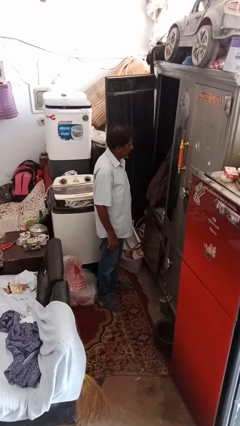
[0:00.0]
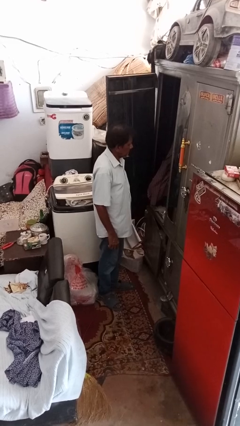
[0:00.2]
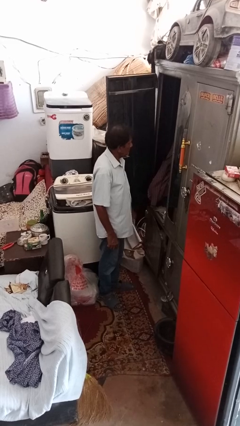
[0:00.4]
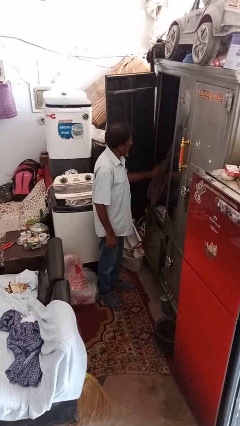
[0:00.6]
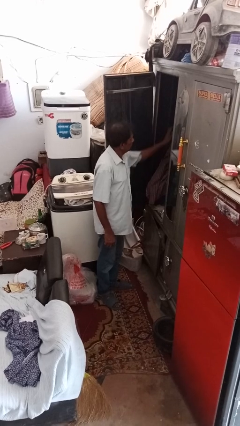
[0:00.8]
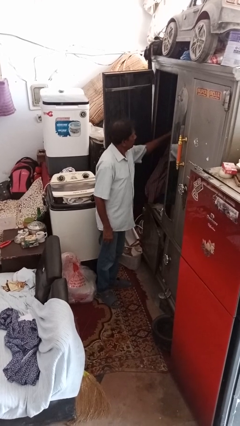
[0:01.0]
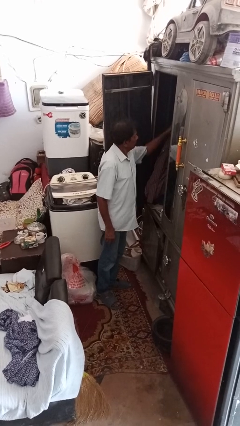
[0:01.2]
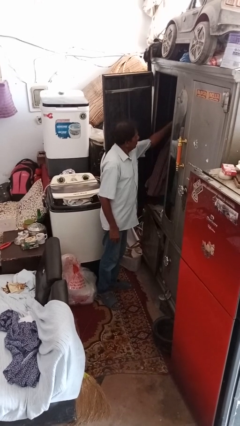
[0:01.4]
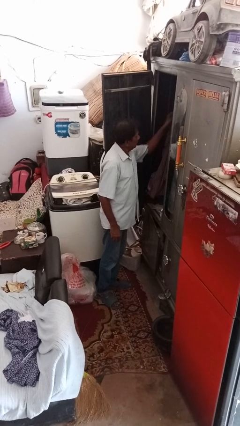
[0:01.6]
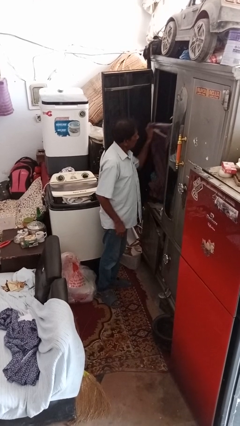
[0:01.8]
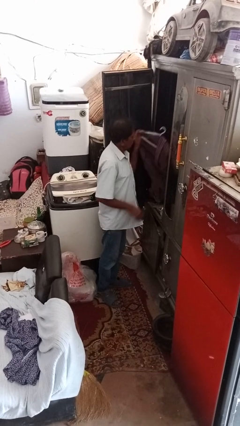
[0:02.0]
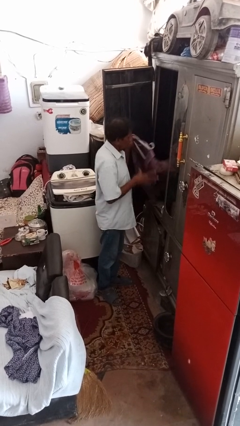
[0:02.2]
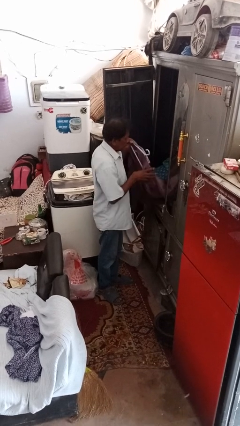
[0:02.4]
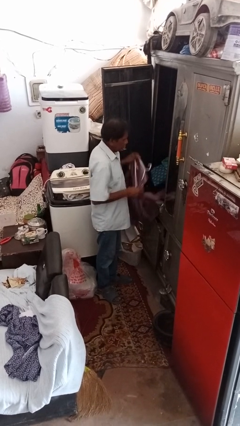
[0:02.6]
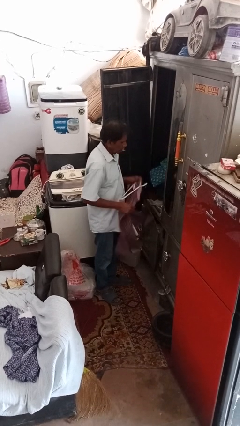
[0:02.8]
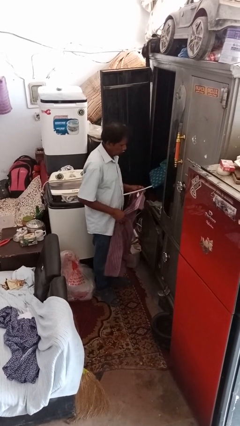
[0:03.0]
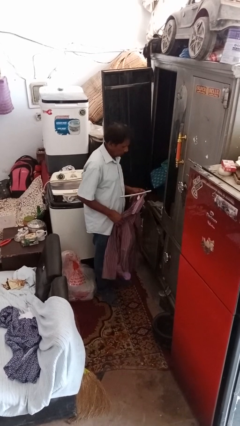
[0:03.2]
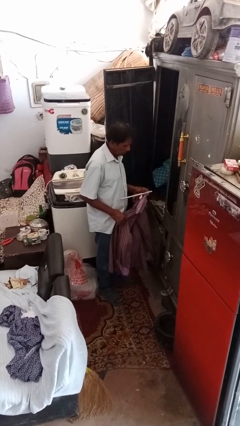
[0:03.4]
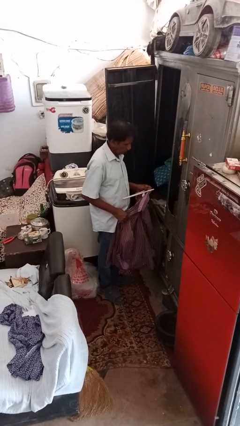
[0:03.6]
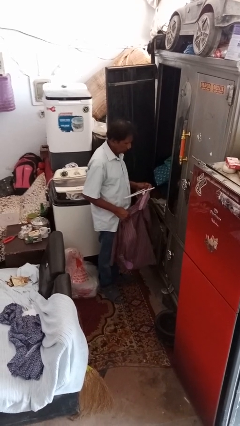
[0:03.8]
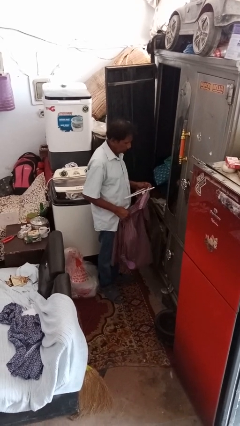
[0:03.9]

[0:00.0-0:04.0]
person takes clothes from closet

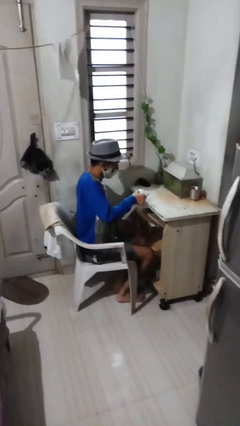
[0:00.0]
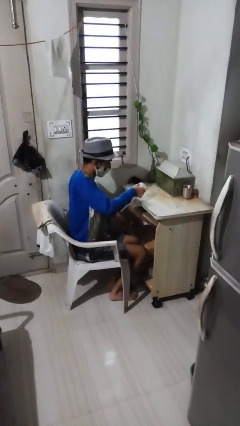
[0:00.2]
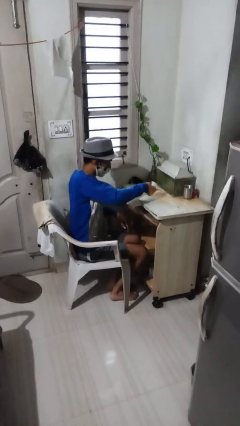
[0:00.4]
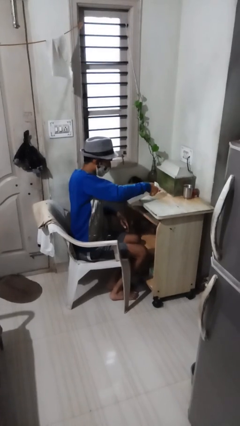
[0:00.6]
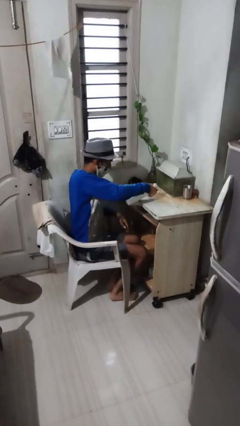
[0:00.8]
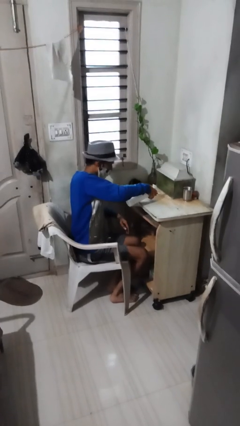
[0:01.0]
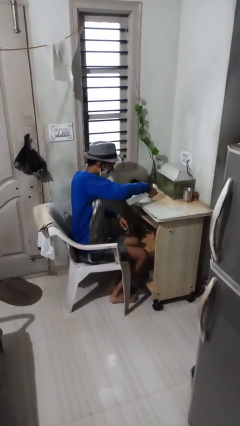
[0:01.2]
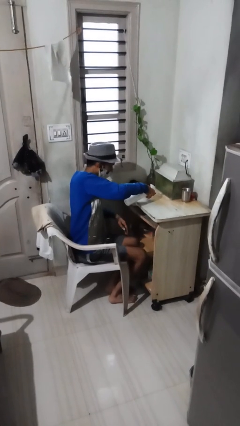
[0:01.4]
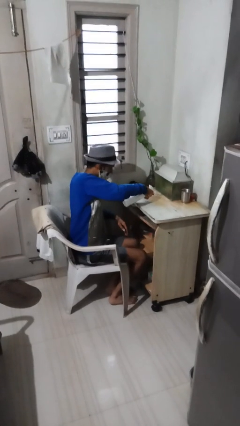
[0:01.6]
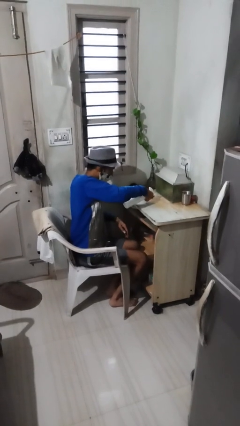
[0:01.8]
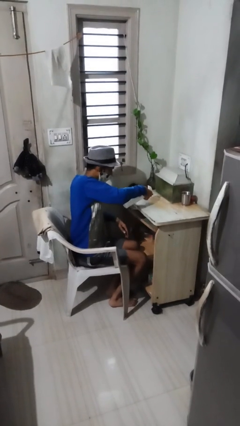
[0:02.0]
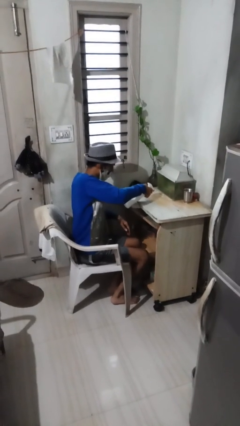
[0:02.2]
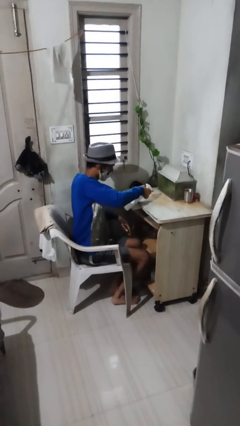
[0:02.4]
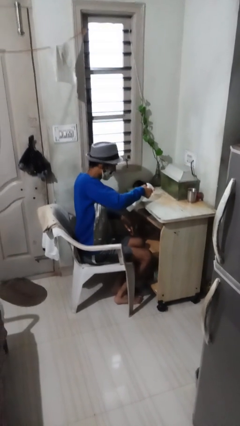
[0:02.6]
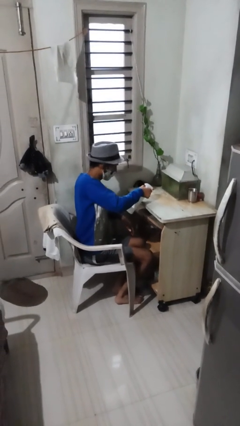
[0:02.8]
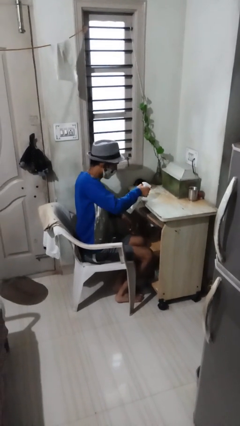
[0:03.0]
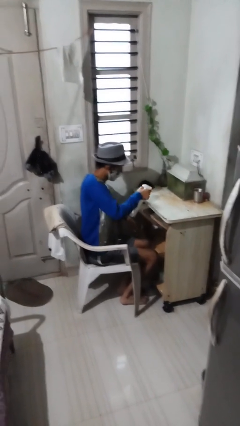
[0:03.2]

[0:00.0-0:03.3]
person sprays from bottle

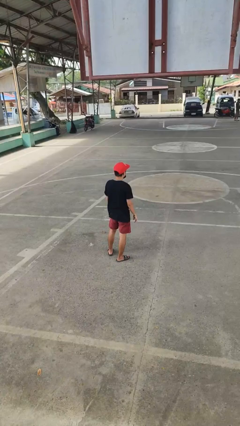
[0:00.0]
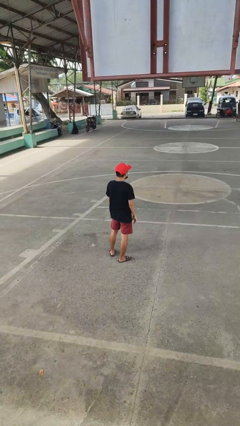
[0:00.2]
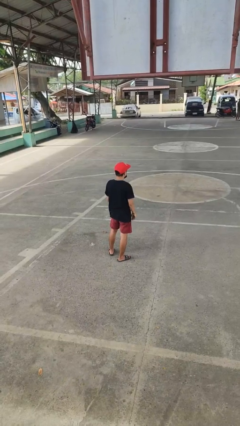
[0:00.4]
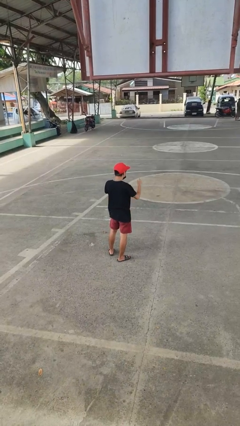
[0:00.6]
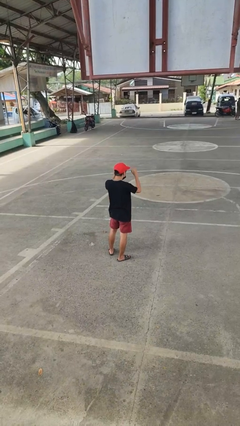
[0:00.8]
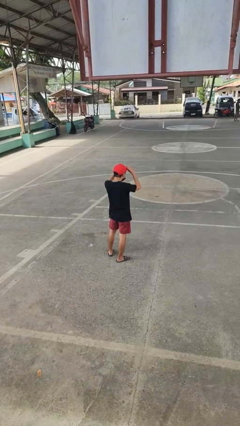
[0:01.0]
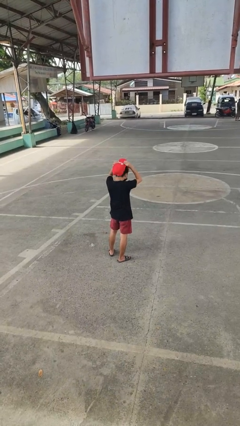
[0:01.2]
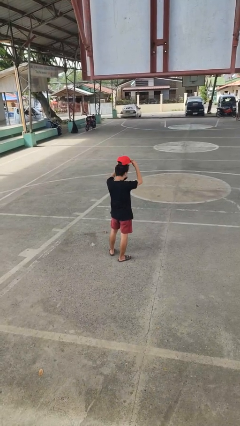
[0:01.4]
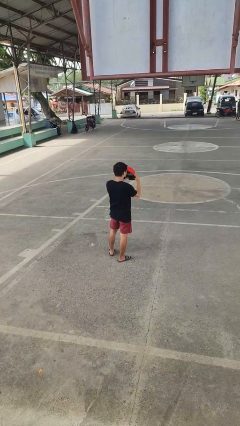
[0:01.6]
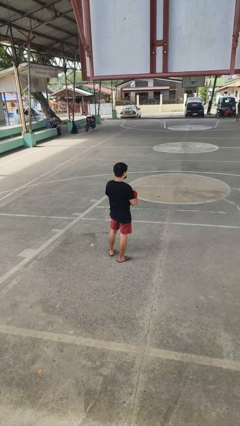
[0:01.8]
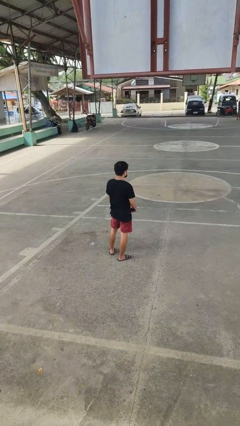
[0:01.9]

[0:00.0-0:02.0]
person takes off hat

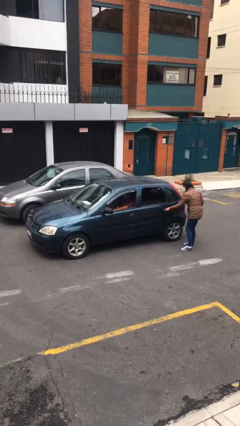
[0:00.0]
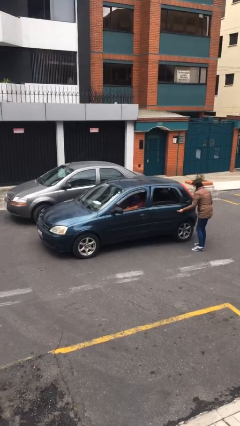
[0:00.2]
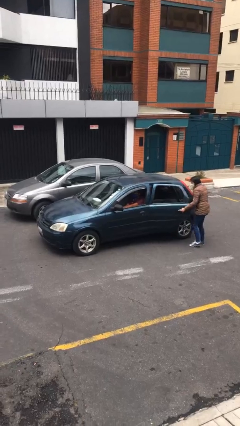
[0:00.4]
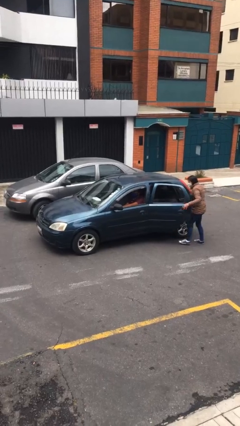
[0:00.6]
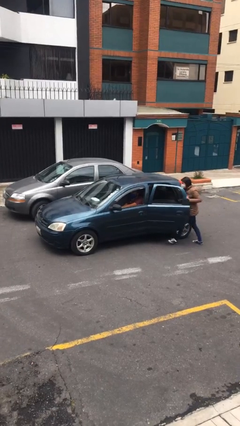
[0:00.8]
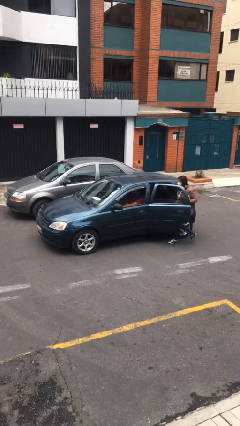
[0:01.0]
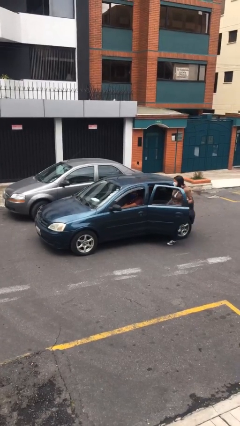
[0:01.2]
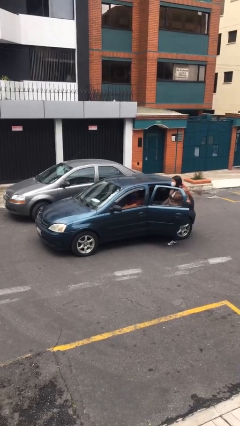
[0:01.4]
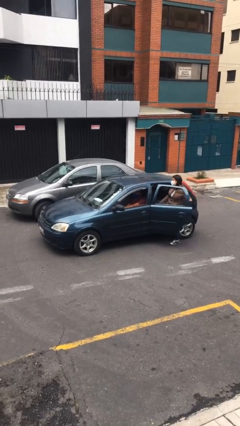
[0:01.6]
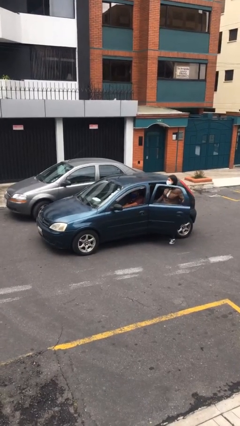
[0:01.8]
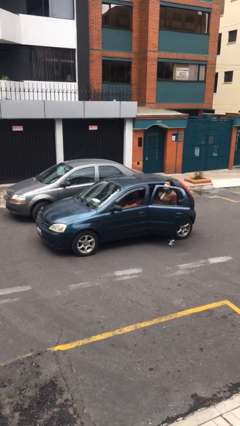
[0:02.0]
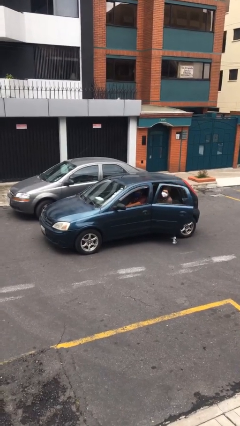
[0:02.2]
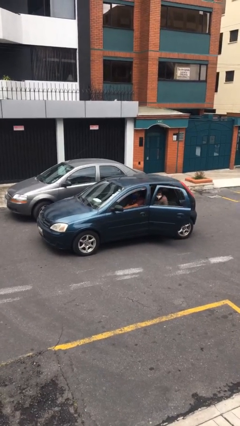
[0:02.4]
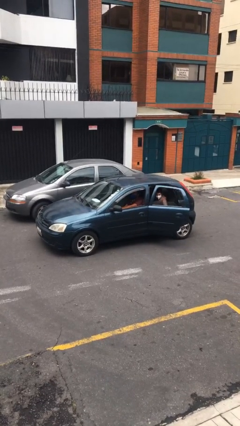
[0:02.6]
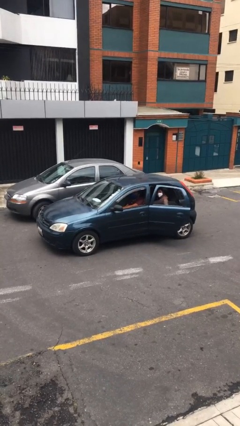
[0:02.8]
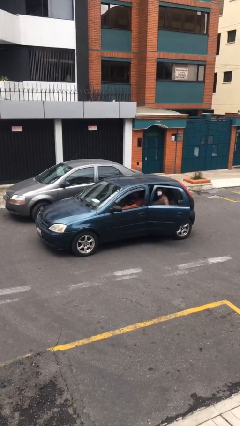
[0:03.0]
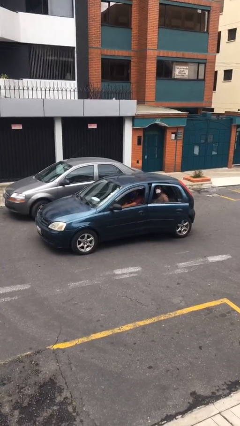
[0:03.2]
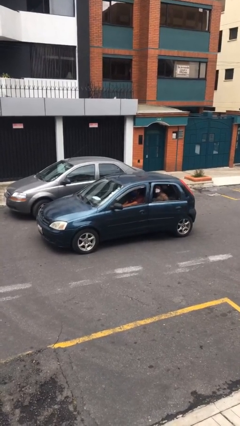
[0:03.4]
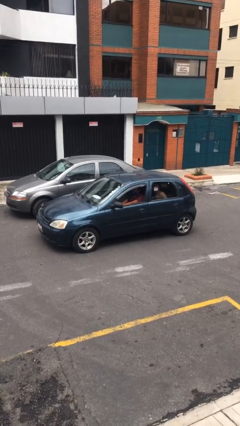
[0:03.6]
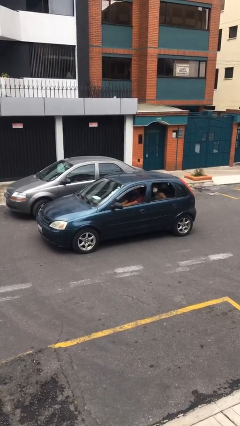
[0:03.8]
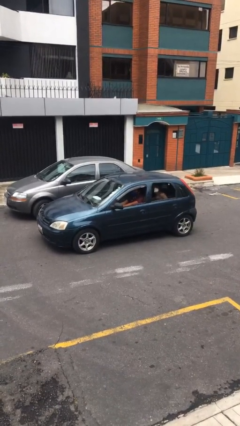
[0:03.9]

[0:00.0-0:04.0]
car picks up person

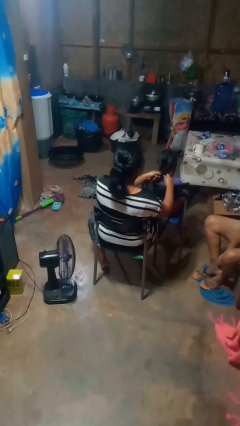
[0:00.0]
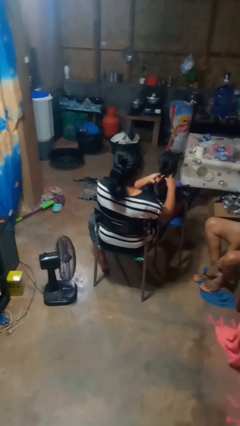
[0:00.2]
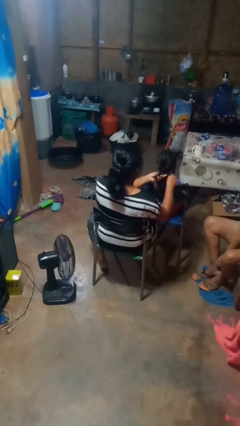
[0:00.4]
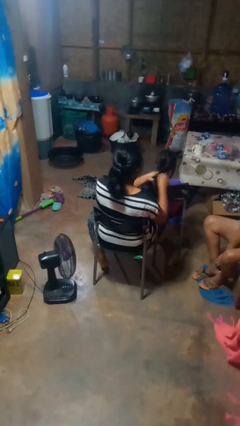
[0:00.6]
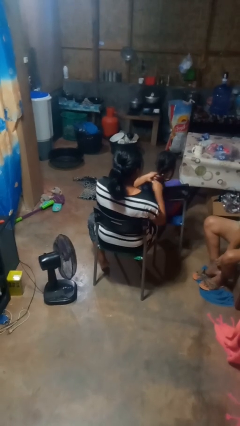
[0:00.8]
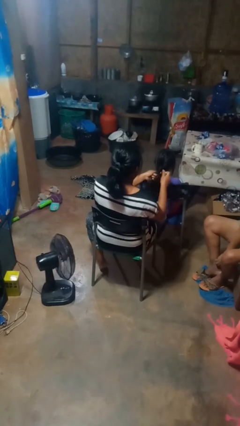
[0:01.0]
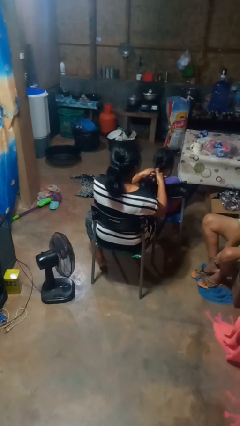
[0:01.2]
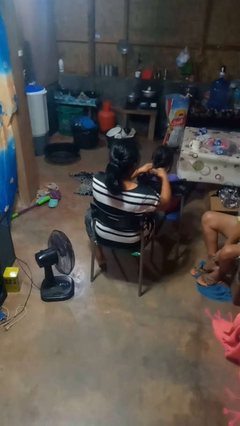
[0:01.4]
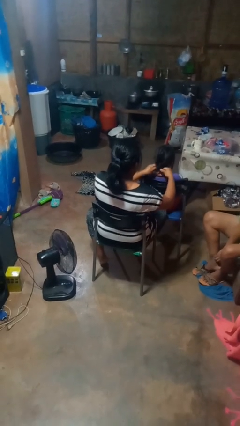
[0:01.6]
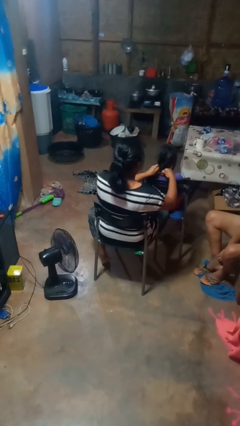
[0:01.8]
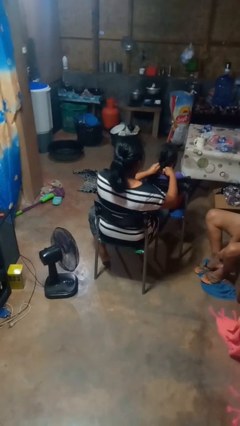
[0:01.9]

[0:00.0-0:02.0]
person braids hair of person

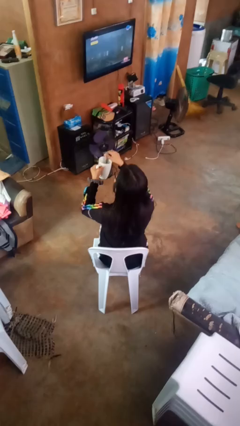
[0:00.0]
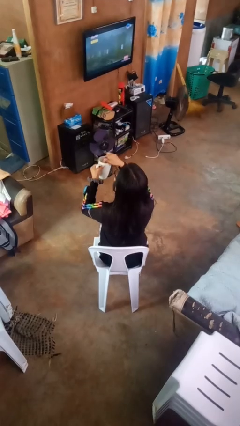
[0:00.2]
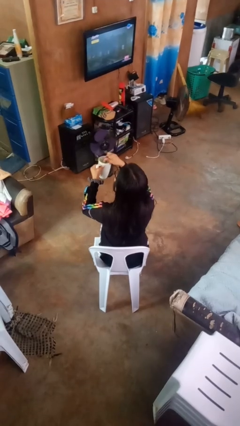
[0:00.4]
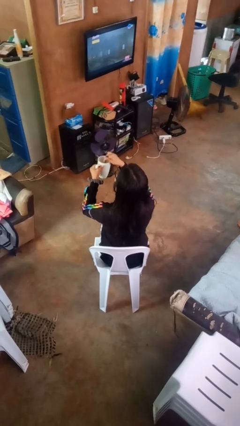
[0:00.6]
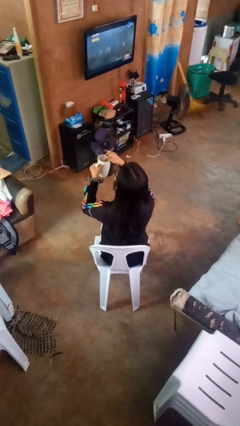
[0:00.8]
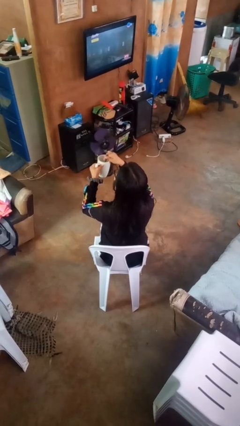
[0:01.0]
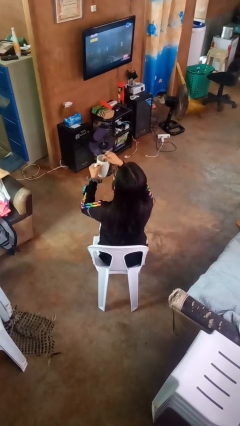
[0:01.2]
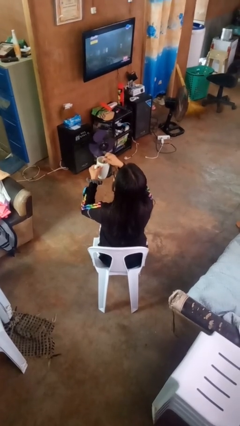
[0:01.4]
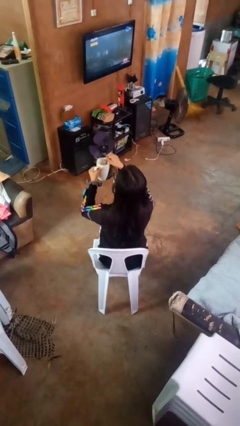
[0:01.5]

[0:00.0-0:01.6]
person stirs mug

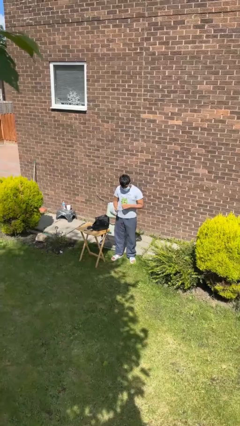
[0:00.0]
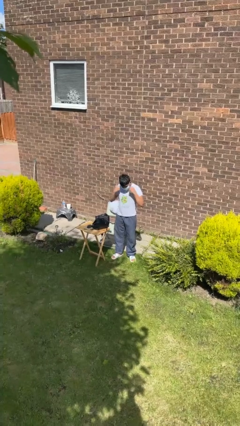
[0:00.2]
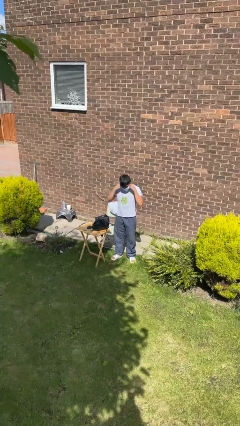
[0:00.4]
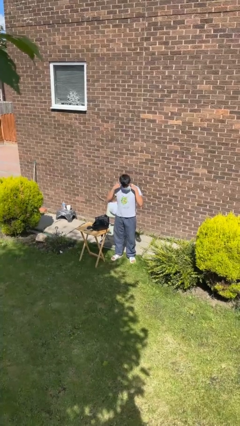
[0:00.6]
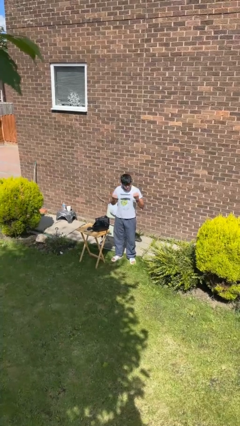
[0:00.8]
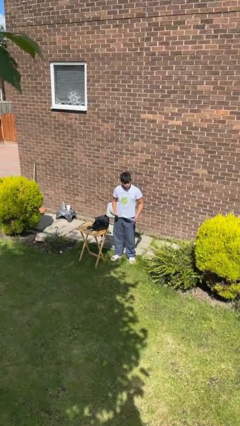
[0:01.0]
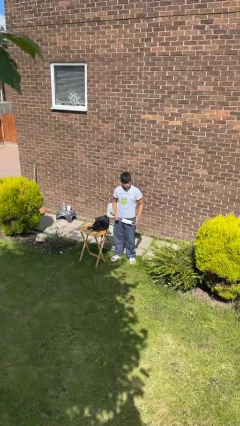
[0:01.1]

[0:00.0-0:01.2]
person takes off facemask
